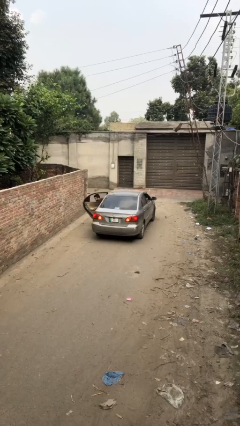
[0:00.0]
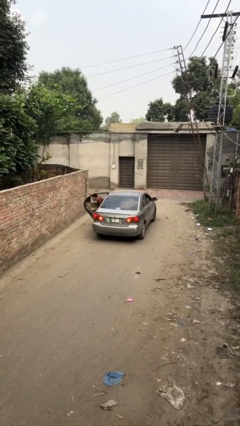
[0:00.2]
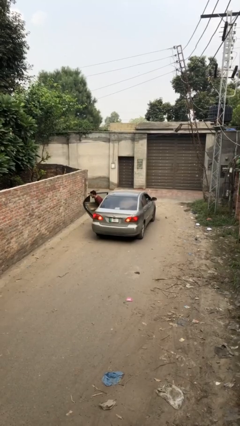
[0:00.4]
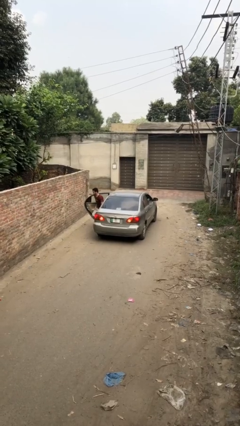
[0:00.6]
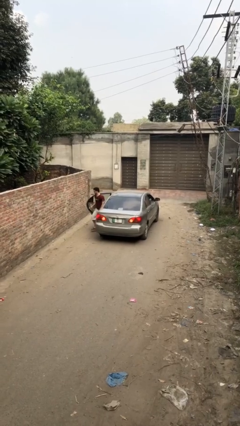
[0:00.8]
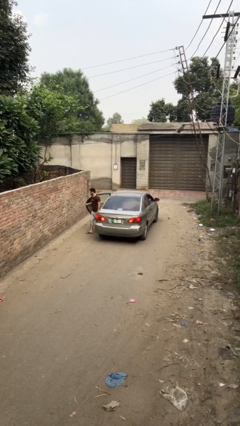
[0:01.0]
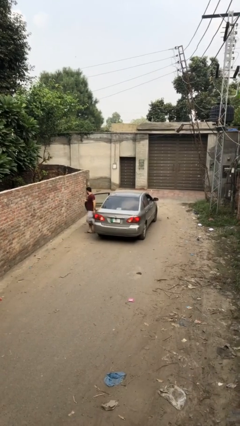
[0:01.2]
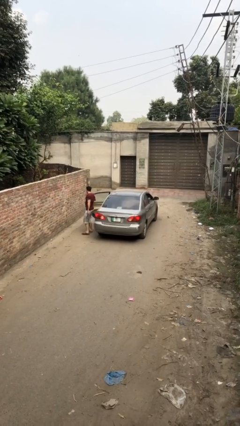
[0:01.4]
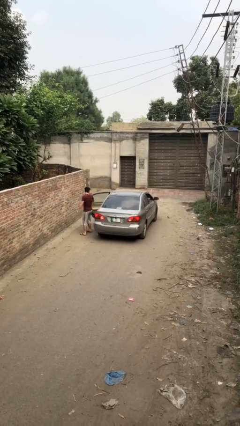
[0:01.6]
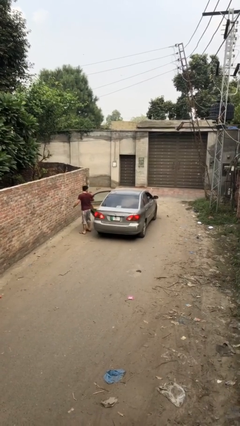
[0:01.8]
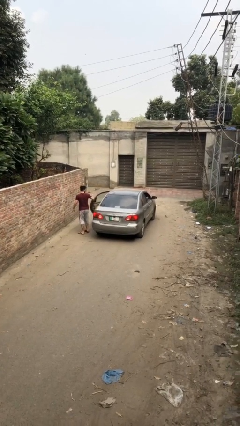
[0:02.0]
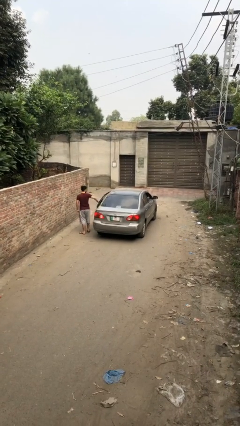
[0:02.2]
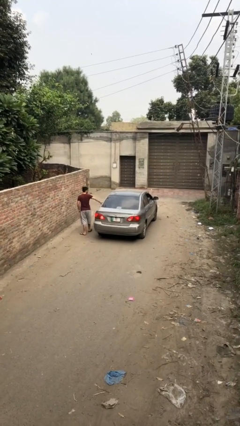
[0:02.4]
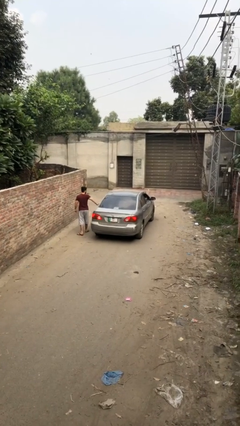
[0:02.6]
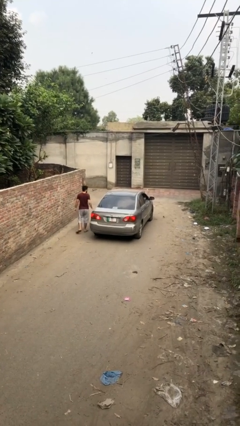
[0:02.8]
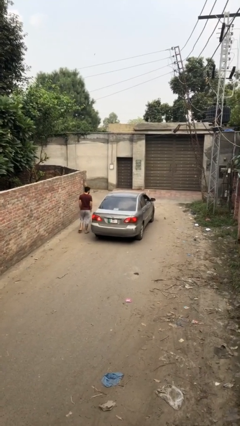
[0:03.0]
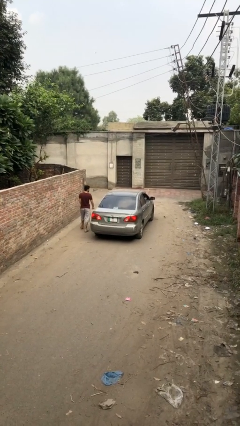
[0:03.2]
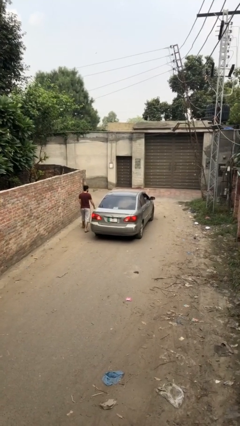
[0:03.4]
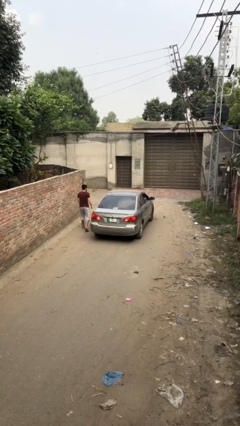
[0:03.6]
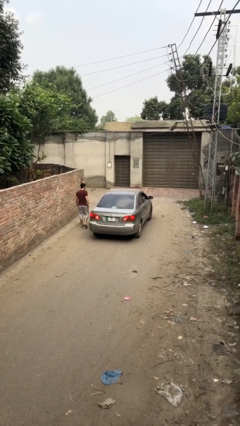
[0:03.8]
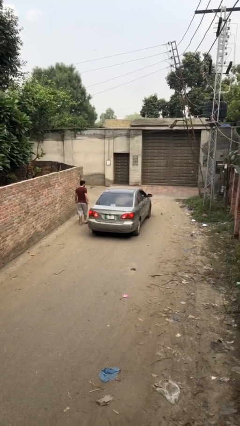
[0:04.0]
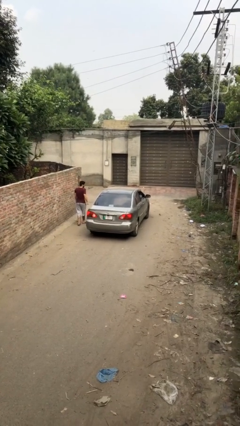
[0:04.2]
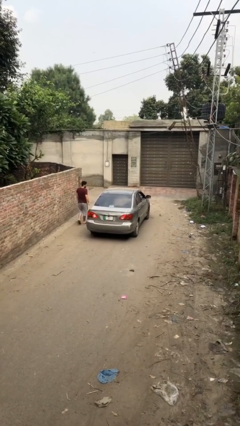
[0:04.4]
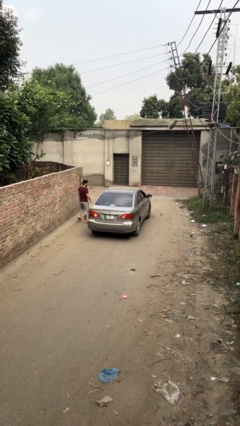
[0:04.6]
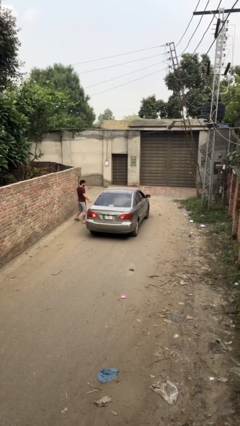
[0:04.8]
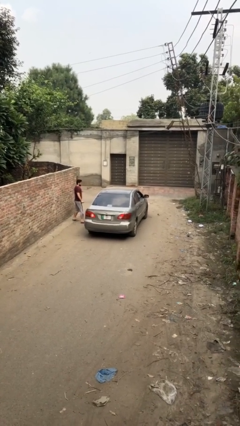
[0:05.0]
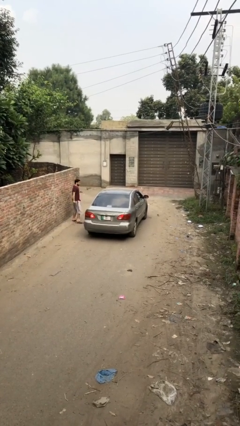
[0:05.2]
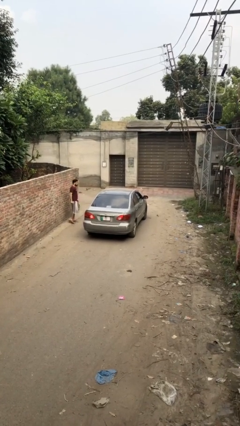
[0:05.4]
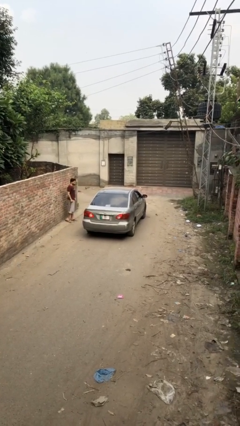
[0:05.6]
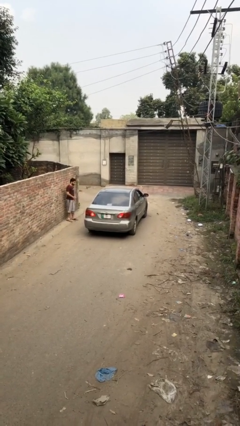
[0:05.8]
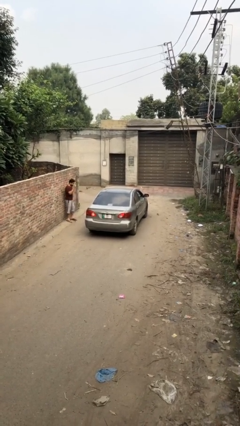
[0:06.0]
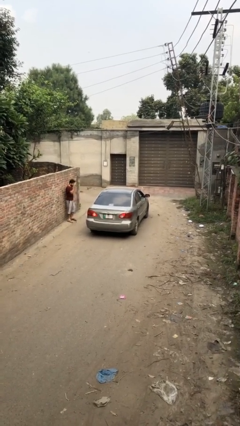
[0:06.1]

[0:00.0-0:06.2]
car drops off person

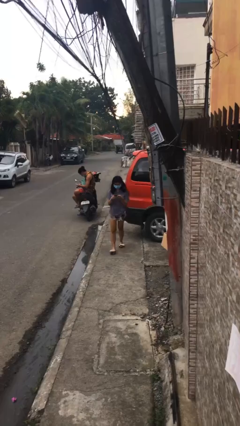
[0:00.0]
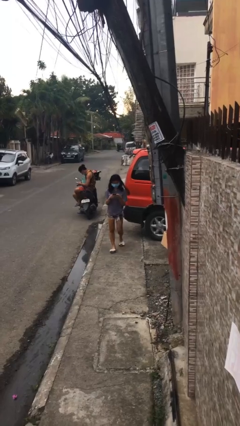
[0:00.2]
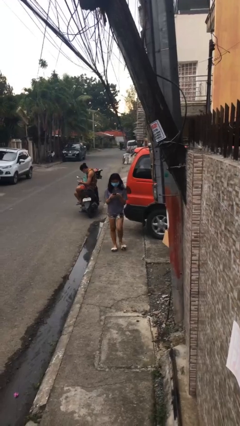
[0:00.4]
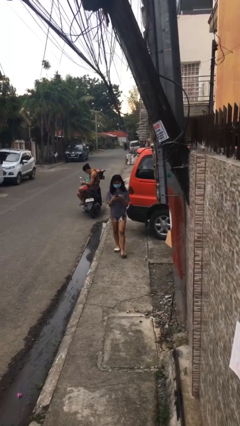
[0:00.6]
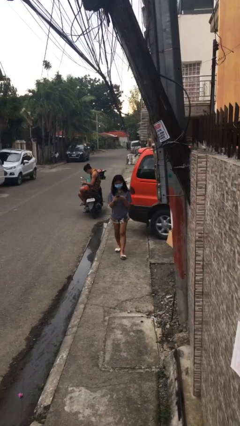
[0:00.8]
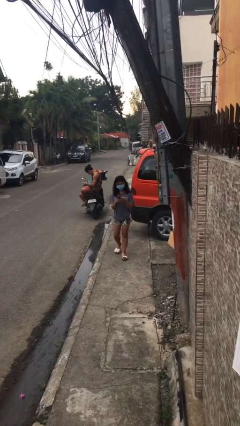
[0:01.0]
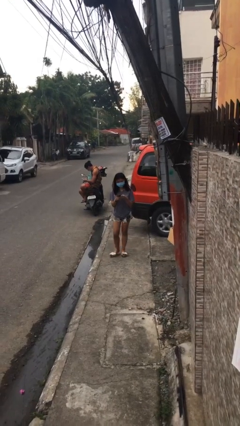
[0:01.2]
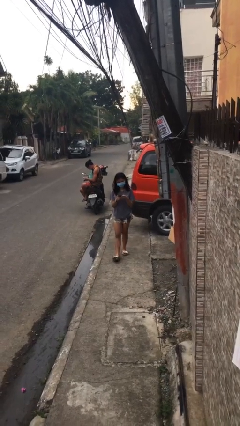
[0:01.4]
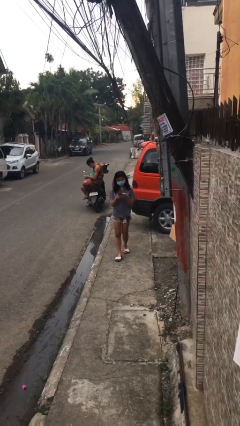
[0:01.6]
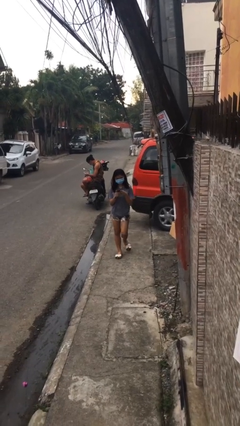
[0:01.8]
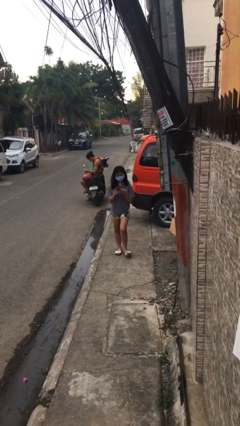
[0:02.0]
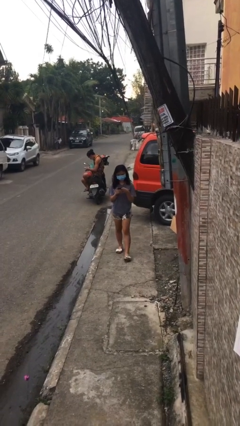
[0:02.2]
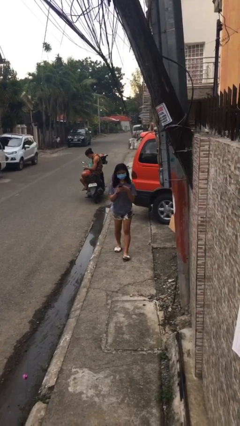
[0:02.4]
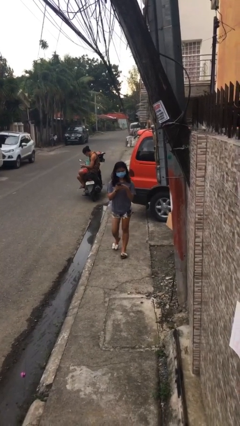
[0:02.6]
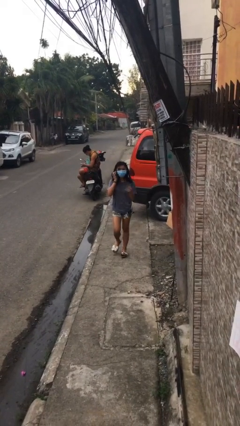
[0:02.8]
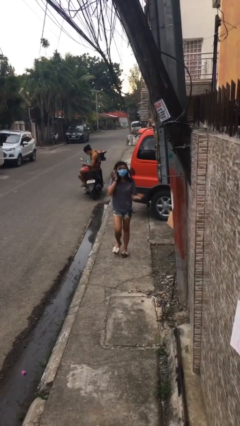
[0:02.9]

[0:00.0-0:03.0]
person texts on phone

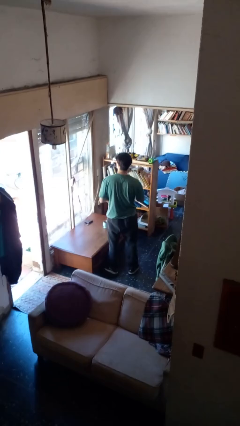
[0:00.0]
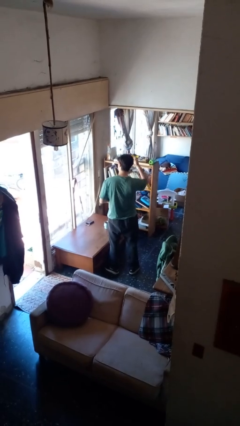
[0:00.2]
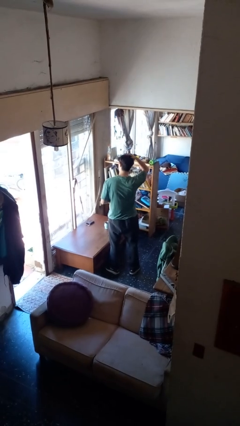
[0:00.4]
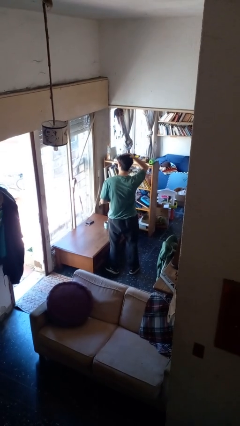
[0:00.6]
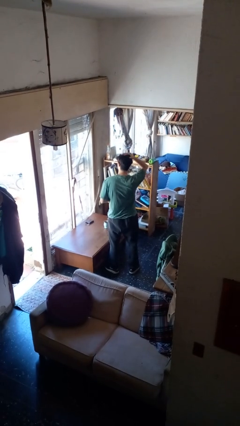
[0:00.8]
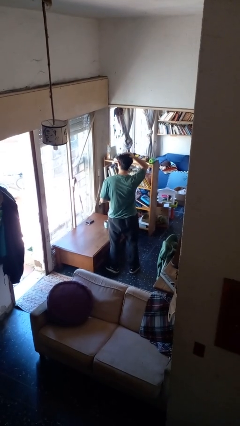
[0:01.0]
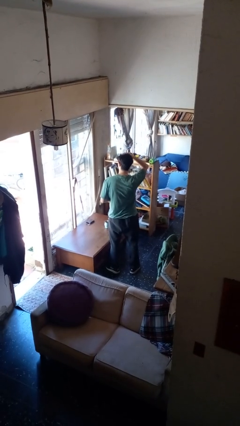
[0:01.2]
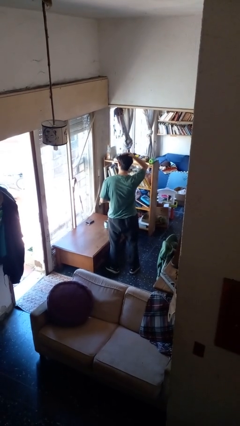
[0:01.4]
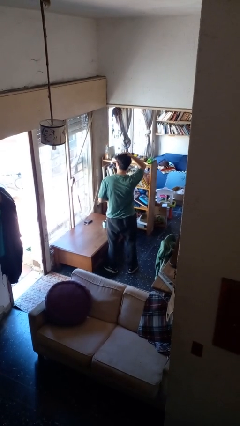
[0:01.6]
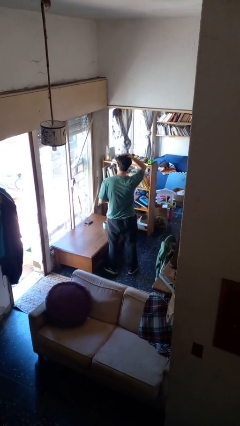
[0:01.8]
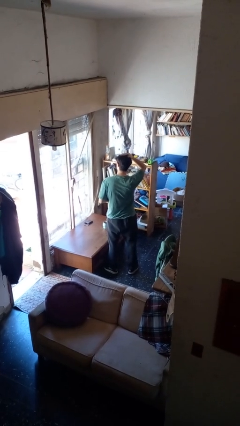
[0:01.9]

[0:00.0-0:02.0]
person pats head

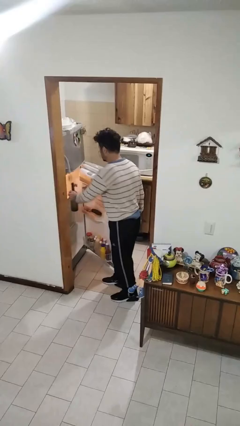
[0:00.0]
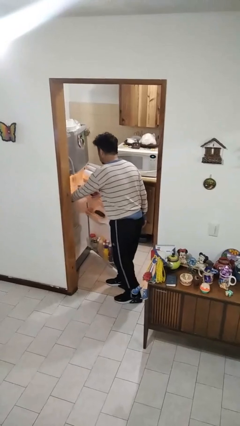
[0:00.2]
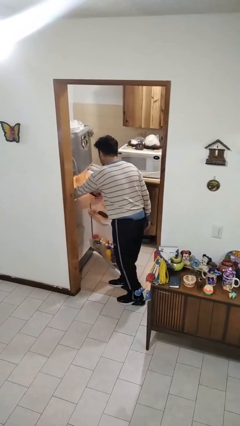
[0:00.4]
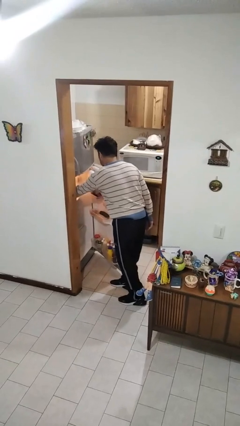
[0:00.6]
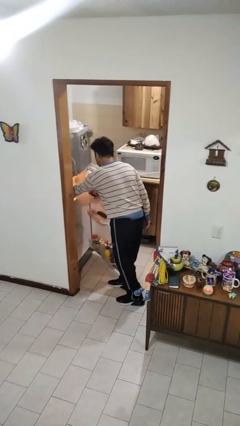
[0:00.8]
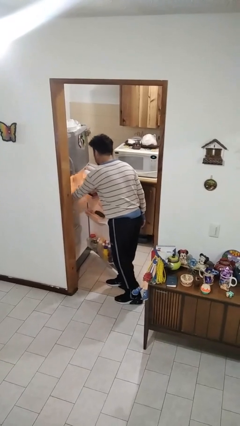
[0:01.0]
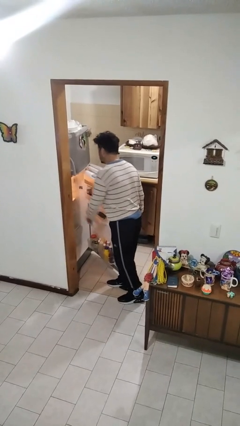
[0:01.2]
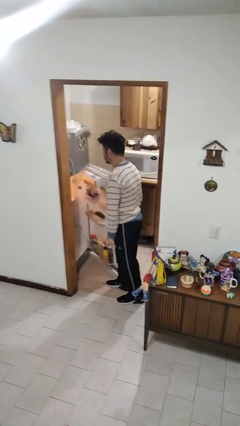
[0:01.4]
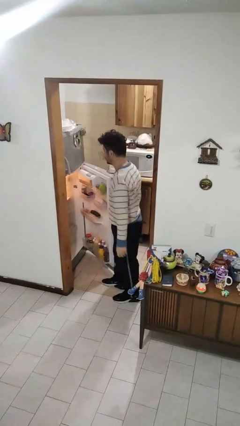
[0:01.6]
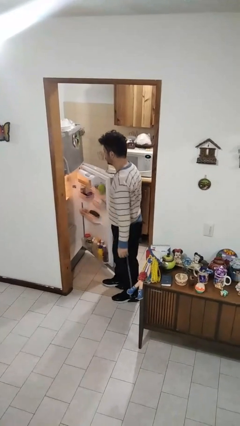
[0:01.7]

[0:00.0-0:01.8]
person puts object into refrigerator

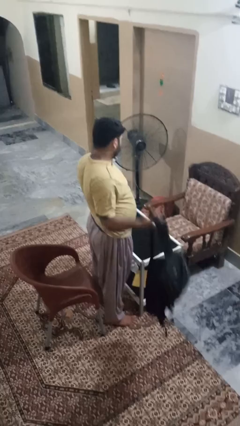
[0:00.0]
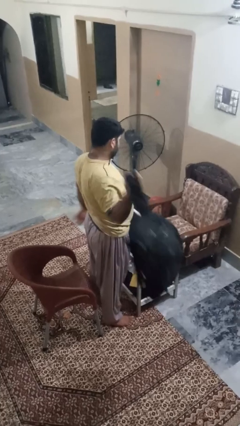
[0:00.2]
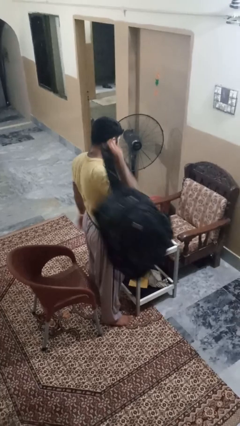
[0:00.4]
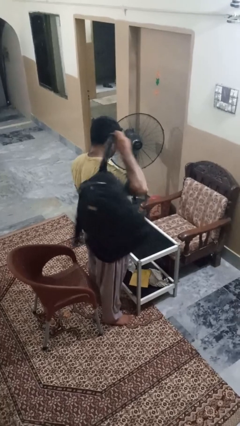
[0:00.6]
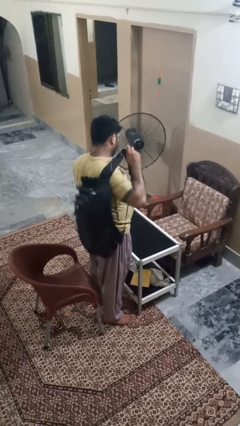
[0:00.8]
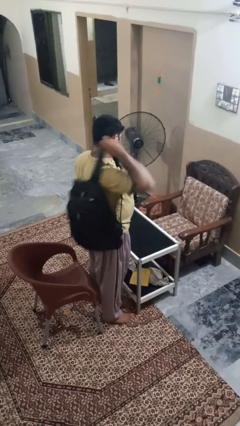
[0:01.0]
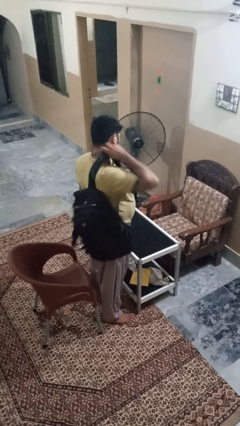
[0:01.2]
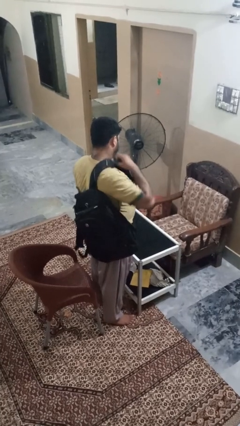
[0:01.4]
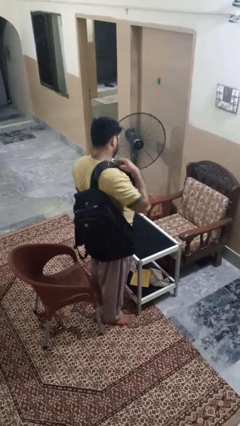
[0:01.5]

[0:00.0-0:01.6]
person puts on backpack

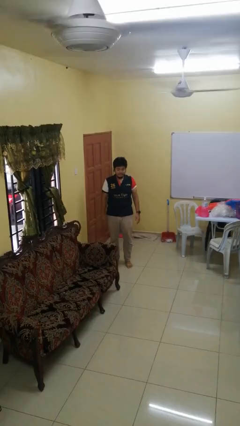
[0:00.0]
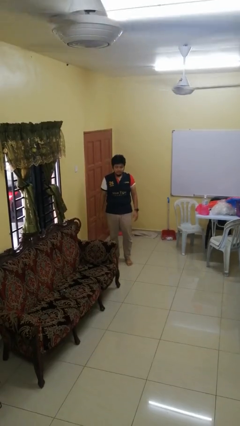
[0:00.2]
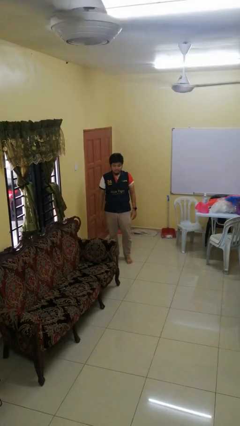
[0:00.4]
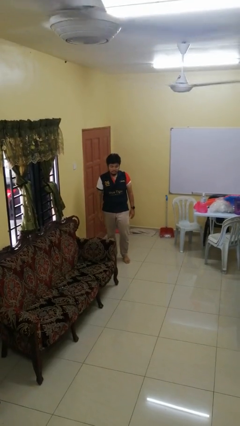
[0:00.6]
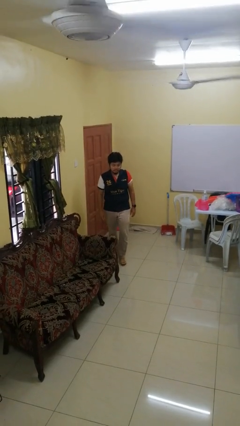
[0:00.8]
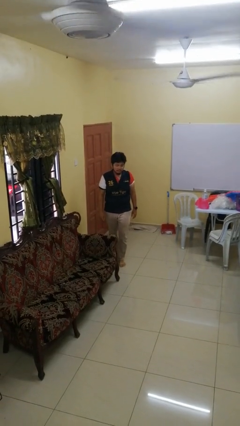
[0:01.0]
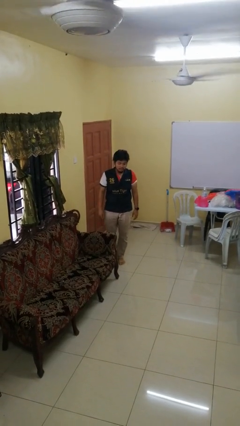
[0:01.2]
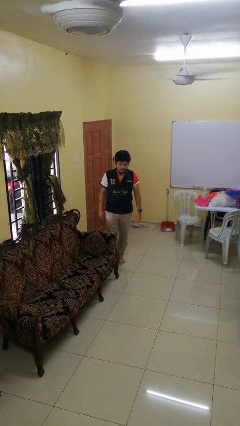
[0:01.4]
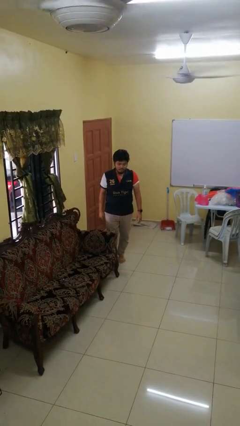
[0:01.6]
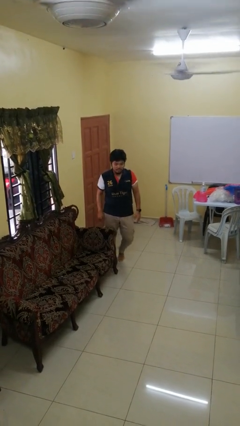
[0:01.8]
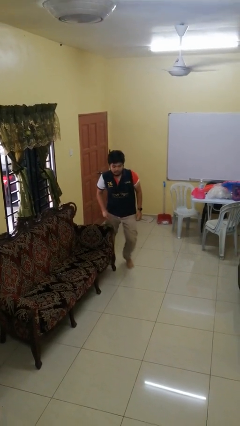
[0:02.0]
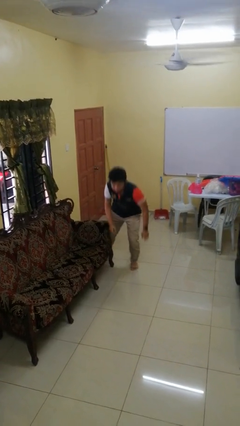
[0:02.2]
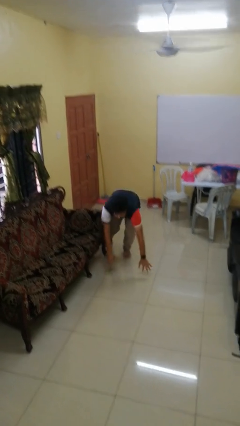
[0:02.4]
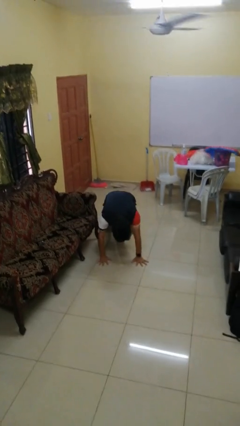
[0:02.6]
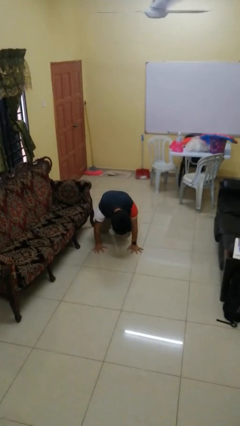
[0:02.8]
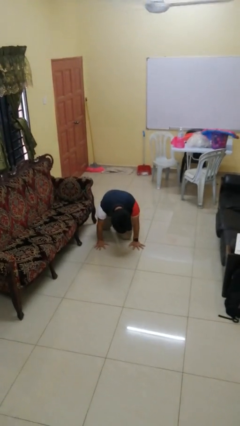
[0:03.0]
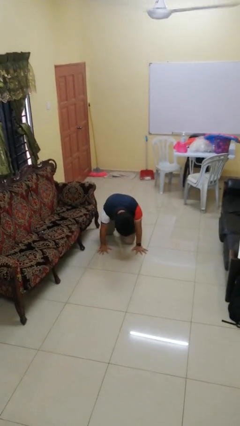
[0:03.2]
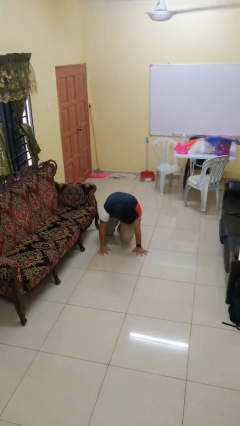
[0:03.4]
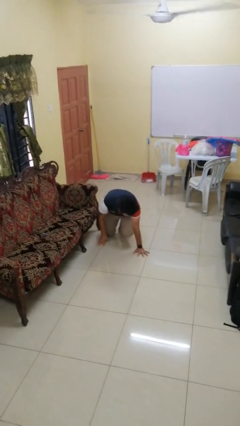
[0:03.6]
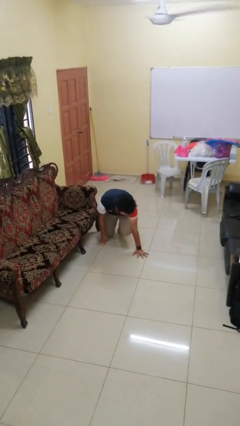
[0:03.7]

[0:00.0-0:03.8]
person trips on object on floor
